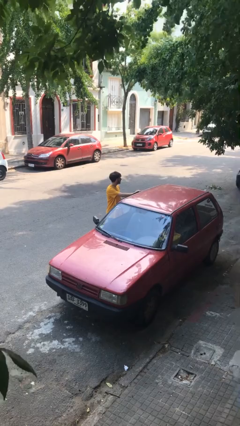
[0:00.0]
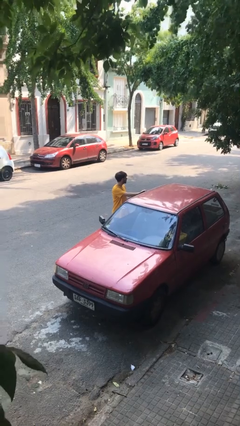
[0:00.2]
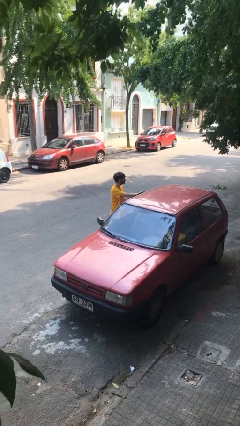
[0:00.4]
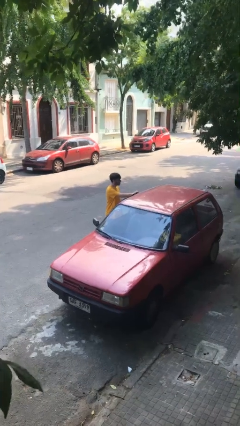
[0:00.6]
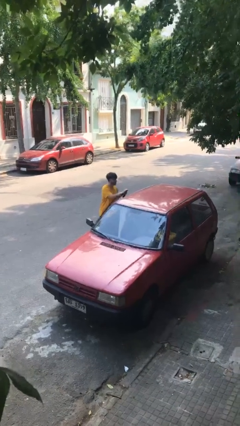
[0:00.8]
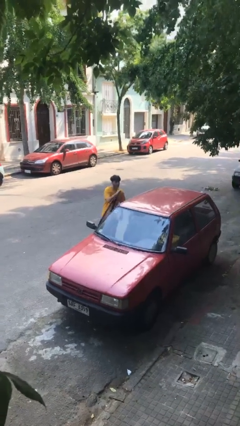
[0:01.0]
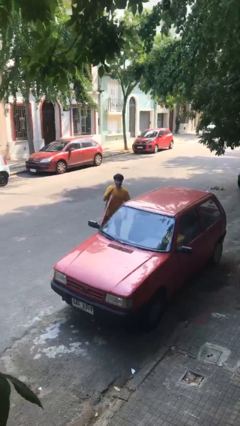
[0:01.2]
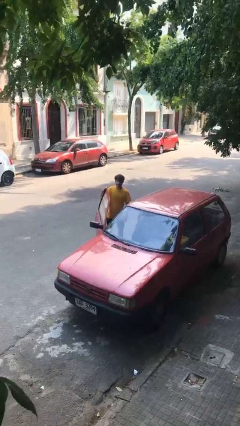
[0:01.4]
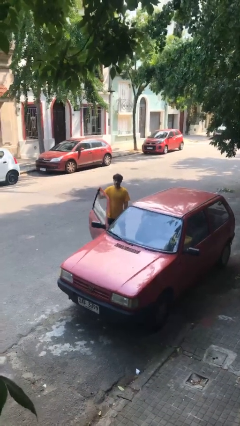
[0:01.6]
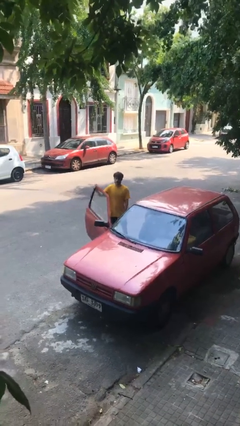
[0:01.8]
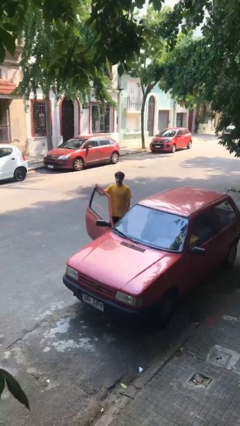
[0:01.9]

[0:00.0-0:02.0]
person opens car door

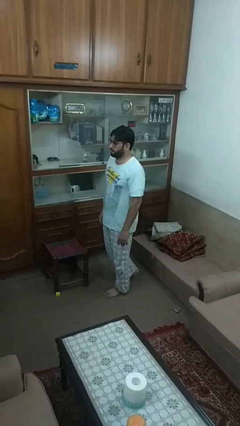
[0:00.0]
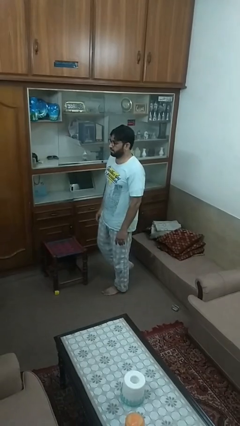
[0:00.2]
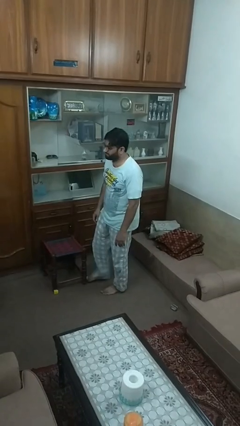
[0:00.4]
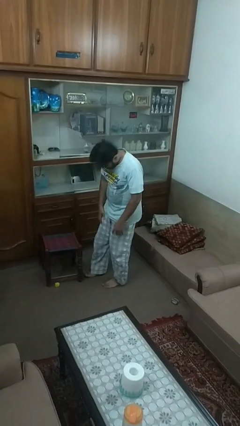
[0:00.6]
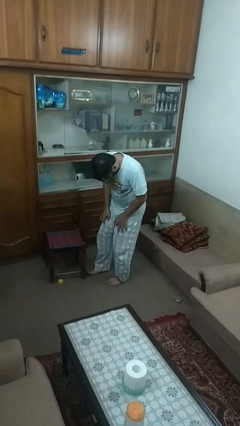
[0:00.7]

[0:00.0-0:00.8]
person trips on object on floor

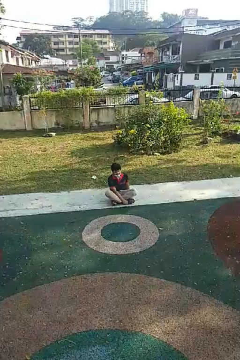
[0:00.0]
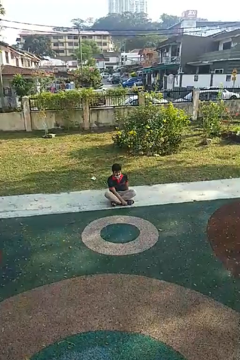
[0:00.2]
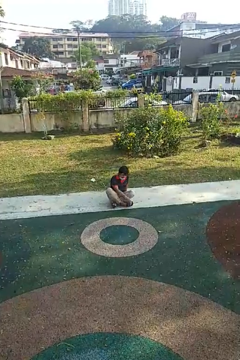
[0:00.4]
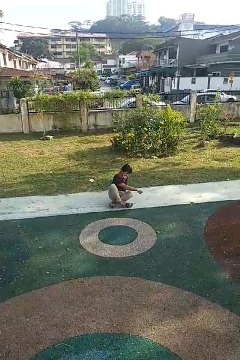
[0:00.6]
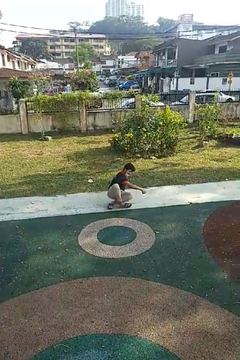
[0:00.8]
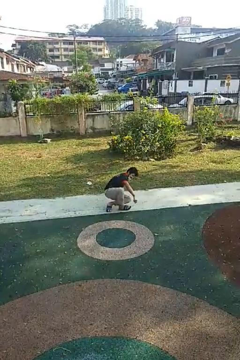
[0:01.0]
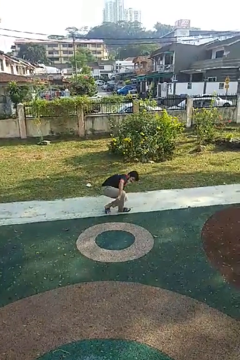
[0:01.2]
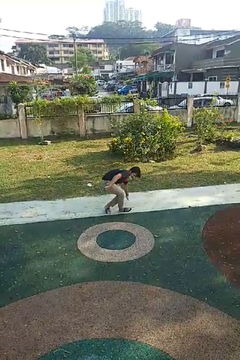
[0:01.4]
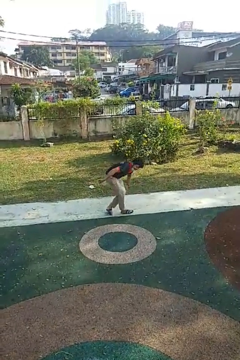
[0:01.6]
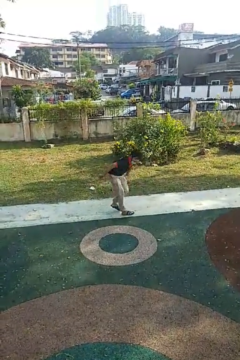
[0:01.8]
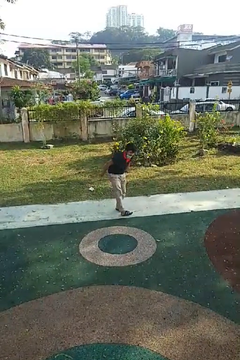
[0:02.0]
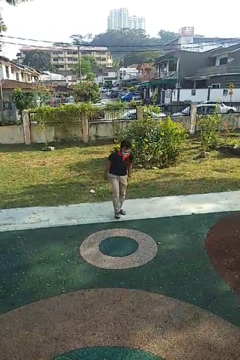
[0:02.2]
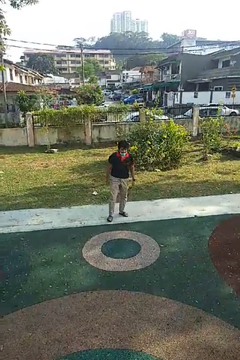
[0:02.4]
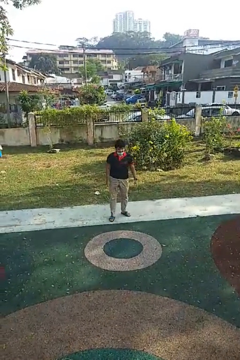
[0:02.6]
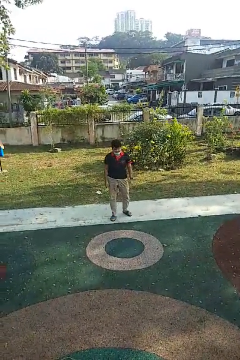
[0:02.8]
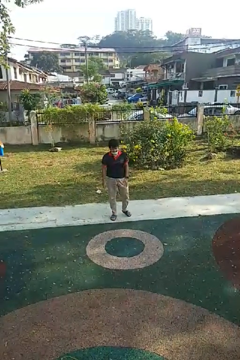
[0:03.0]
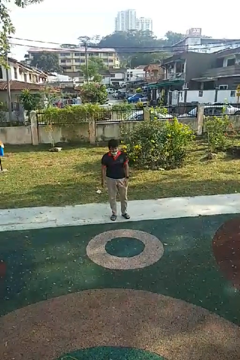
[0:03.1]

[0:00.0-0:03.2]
person stands up from floor

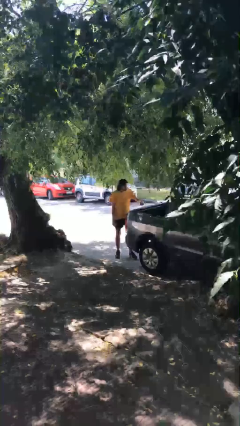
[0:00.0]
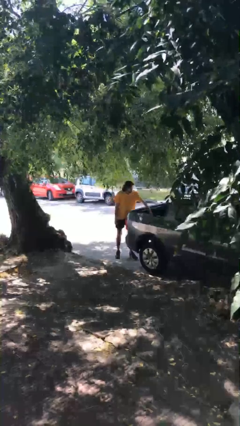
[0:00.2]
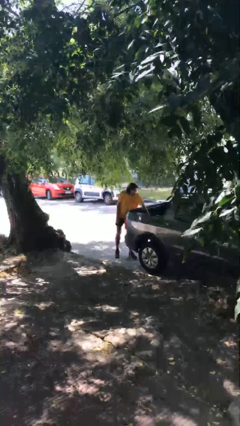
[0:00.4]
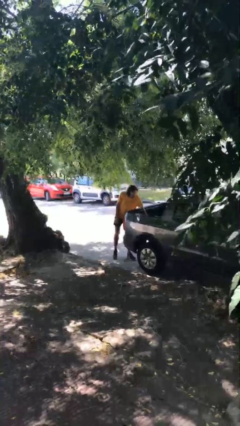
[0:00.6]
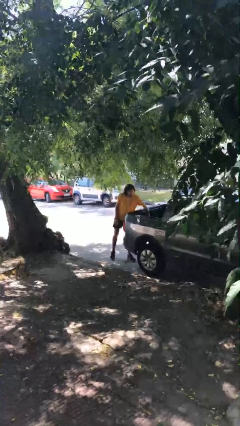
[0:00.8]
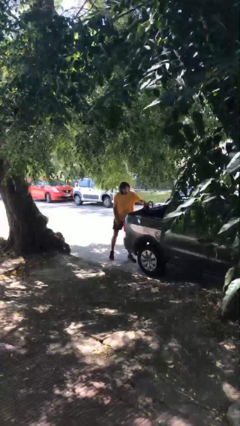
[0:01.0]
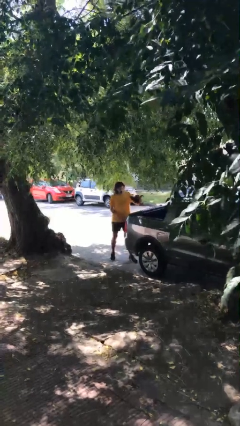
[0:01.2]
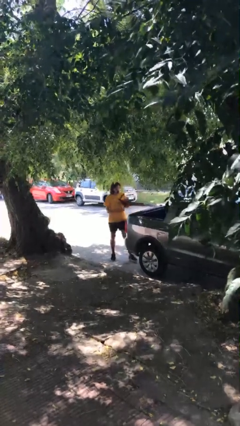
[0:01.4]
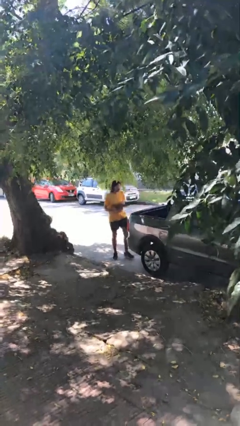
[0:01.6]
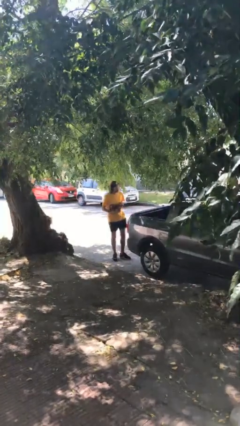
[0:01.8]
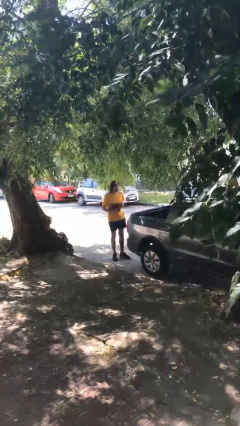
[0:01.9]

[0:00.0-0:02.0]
person unloads car

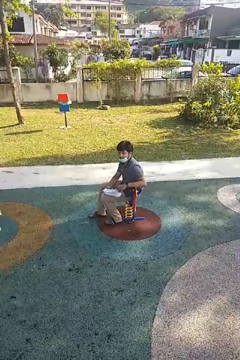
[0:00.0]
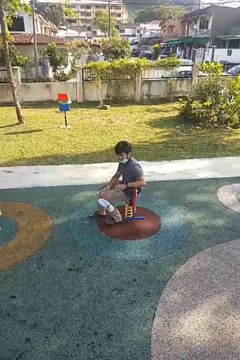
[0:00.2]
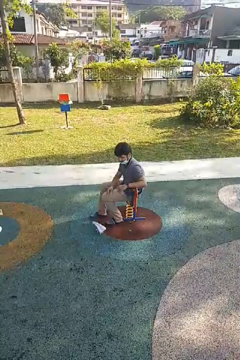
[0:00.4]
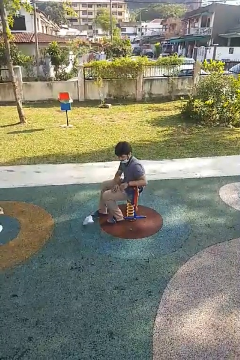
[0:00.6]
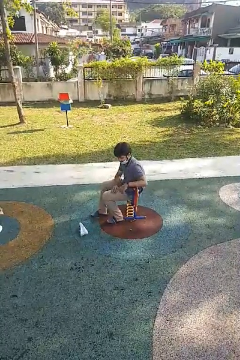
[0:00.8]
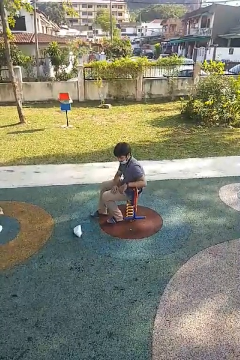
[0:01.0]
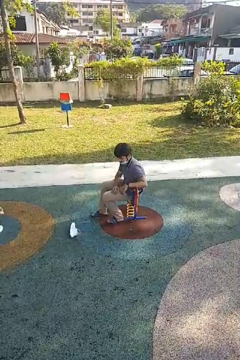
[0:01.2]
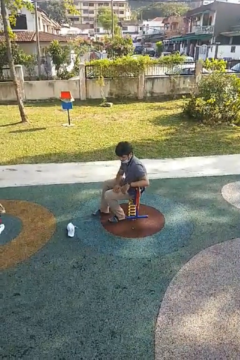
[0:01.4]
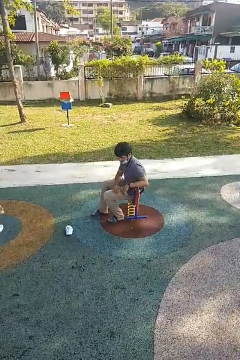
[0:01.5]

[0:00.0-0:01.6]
person drops object

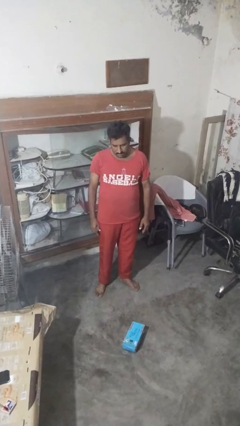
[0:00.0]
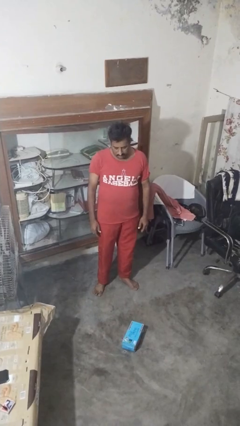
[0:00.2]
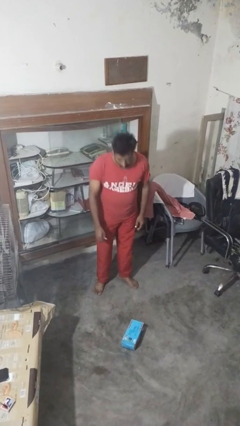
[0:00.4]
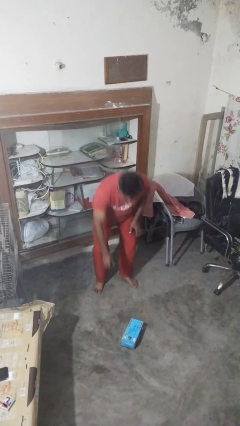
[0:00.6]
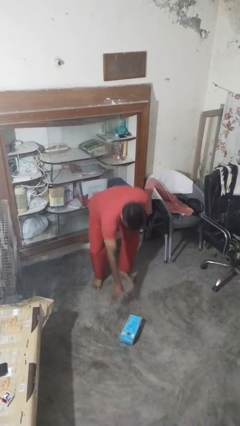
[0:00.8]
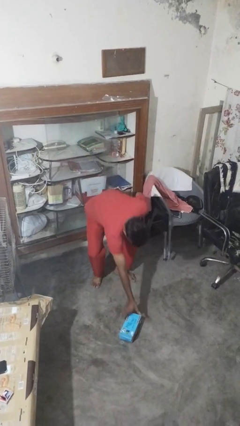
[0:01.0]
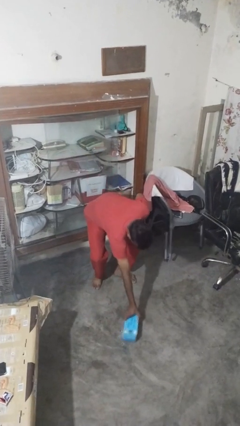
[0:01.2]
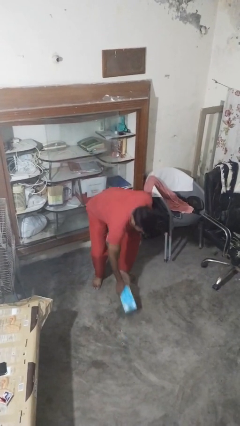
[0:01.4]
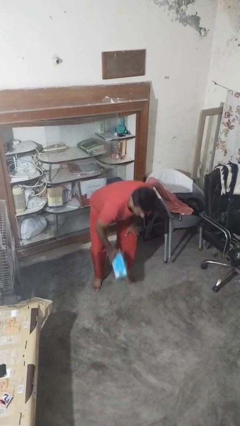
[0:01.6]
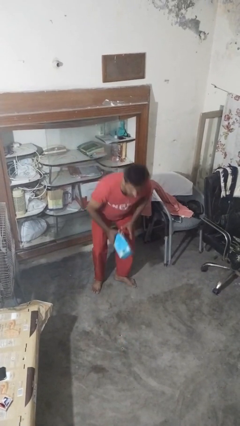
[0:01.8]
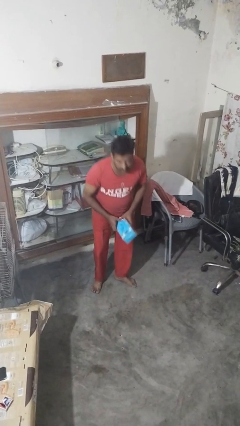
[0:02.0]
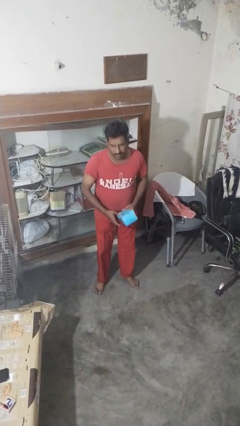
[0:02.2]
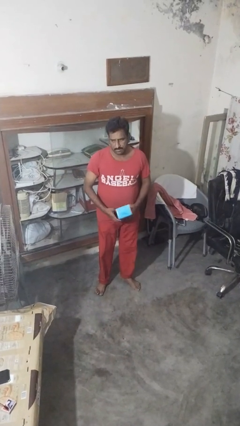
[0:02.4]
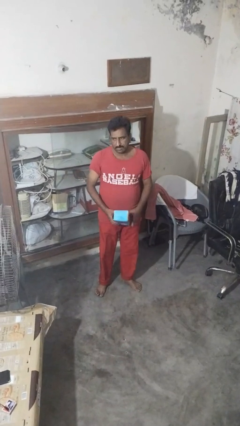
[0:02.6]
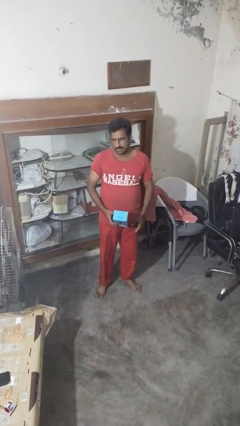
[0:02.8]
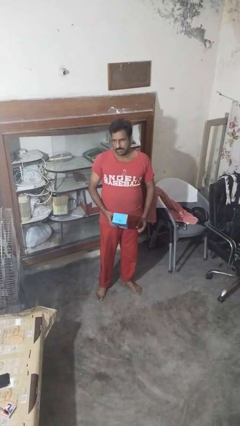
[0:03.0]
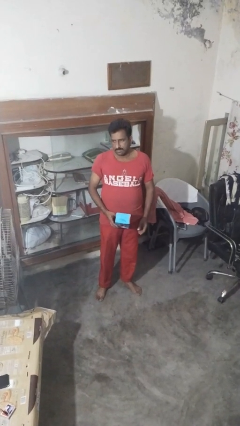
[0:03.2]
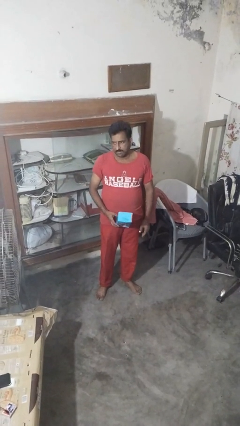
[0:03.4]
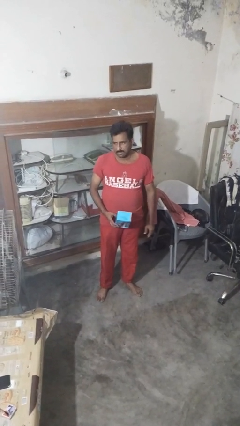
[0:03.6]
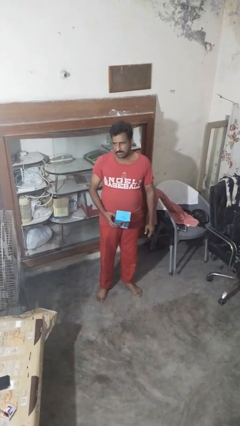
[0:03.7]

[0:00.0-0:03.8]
person picks up object from floor

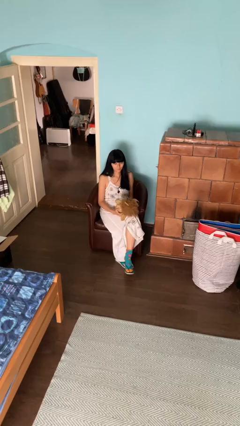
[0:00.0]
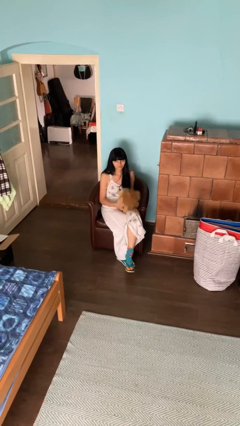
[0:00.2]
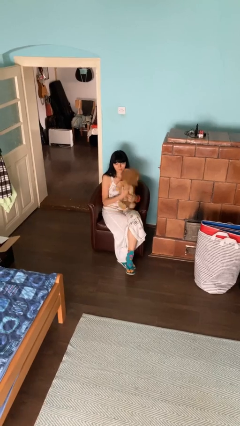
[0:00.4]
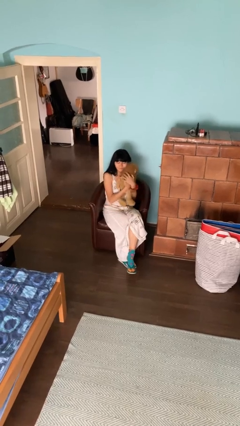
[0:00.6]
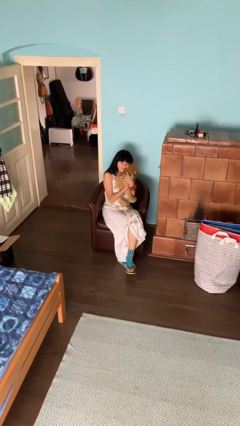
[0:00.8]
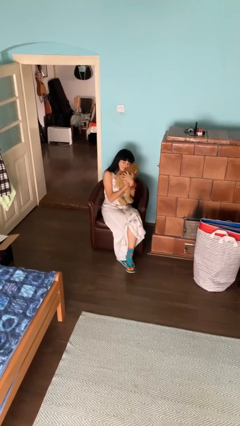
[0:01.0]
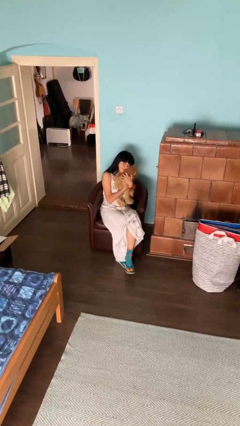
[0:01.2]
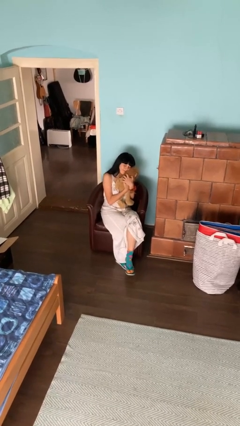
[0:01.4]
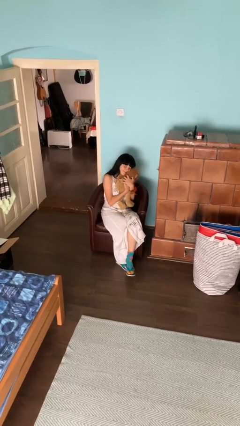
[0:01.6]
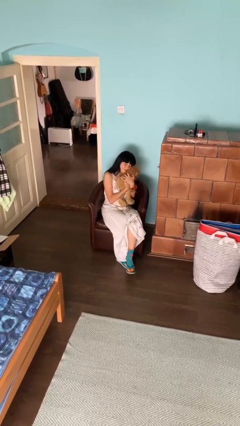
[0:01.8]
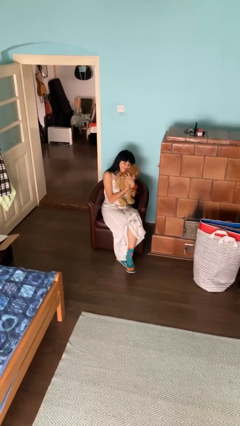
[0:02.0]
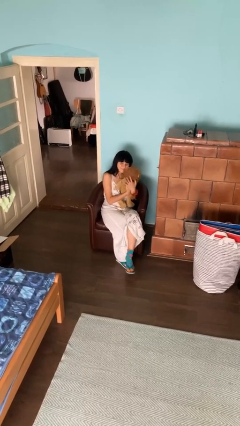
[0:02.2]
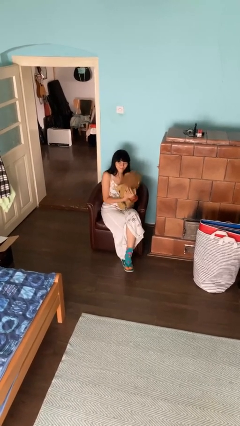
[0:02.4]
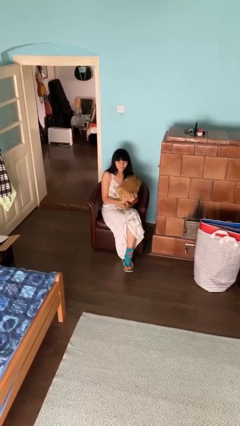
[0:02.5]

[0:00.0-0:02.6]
person hugs stuffed animal

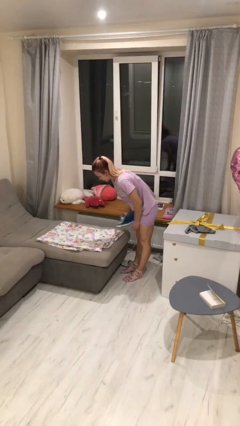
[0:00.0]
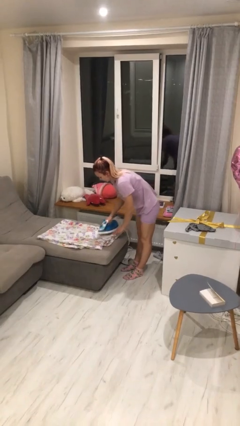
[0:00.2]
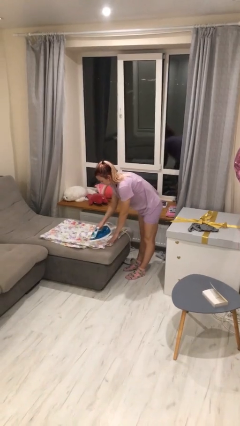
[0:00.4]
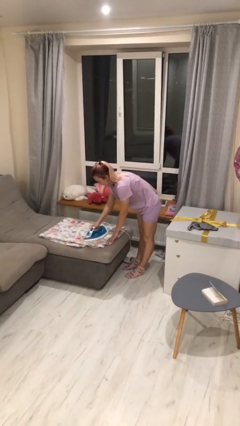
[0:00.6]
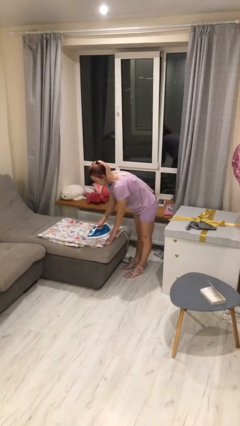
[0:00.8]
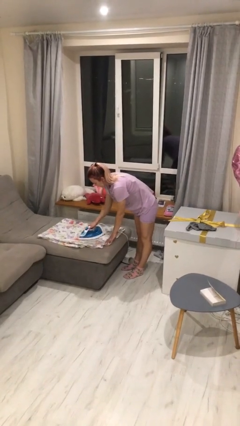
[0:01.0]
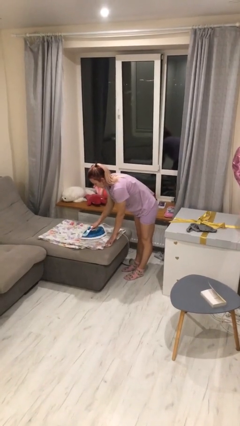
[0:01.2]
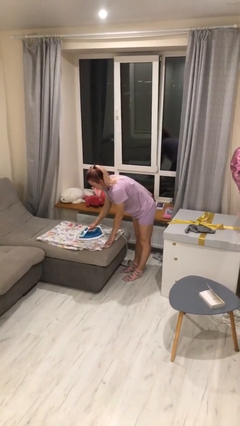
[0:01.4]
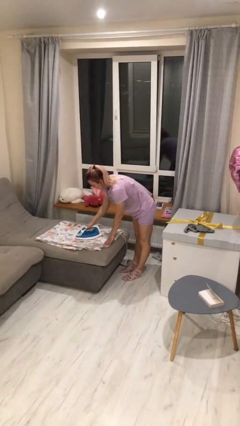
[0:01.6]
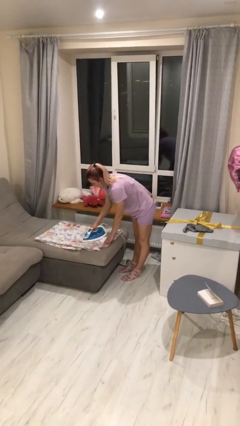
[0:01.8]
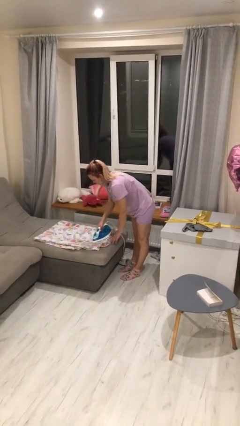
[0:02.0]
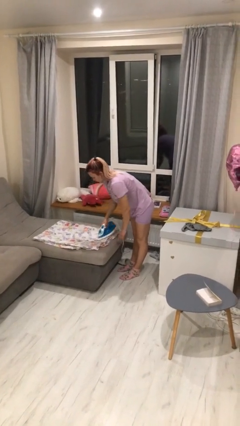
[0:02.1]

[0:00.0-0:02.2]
person irons clothes
